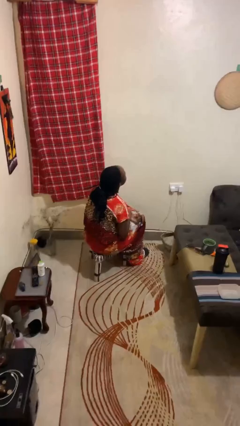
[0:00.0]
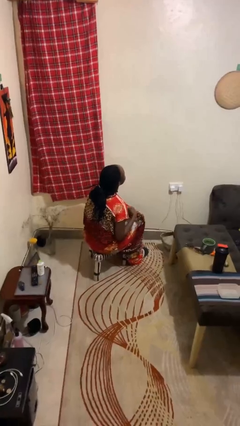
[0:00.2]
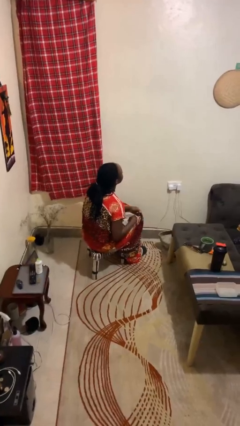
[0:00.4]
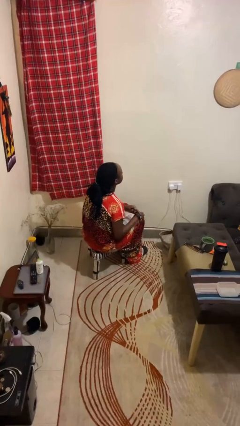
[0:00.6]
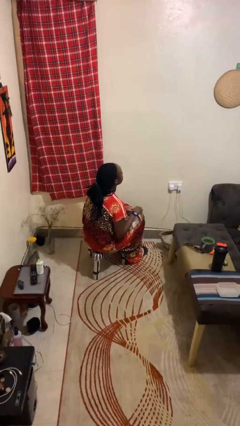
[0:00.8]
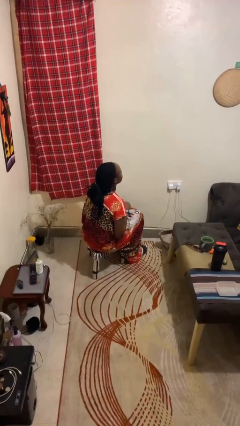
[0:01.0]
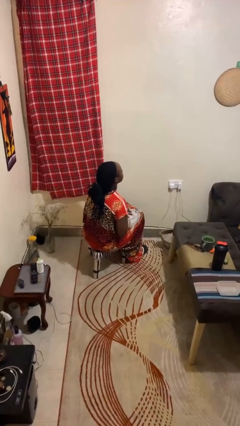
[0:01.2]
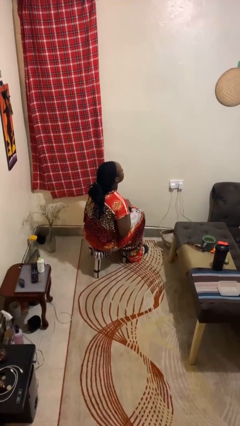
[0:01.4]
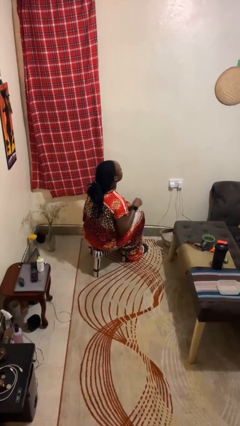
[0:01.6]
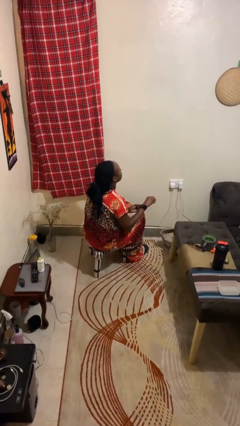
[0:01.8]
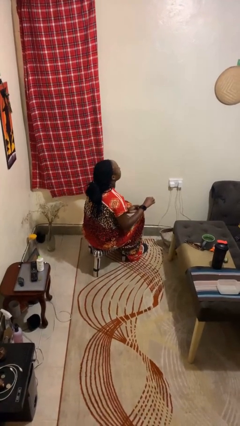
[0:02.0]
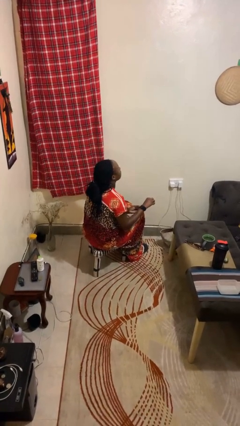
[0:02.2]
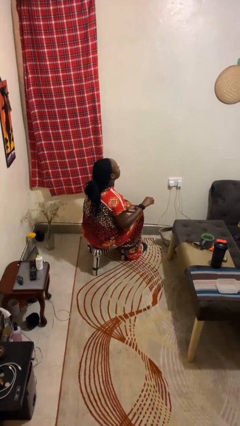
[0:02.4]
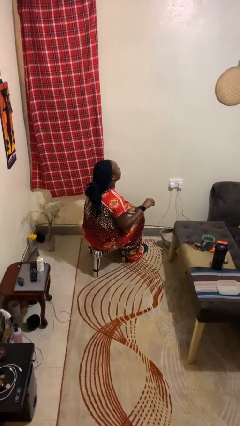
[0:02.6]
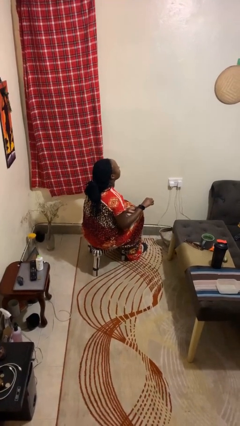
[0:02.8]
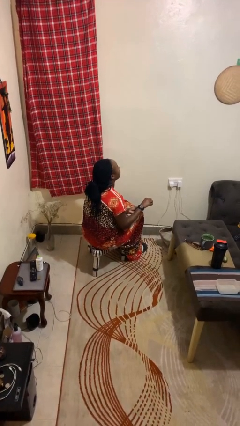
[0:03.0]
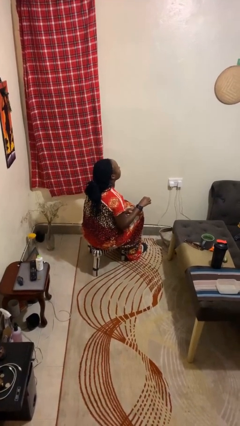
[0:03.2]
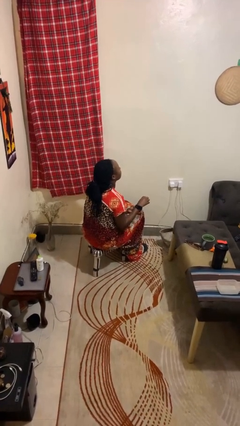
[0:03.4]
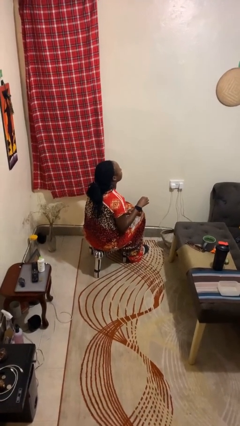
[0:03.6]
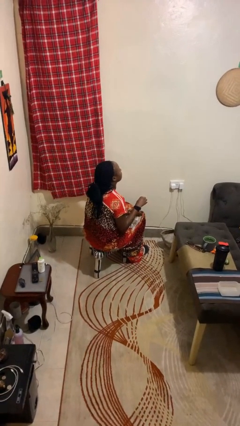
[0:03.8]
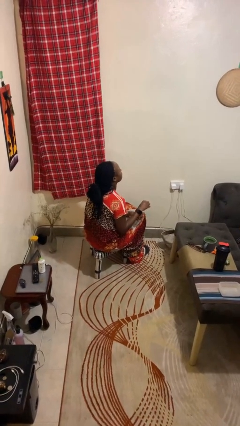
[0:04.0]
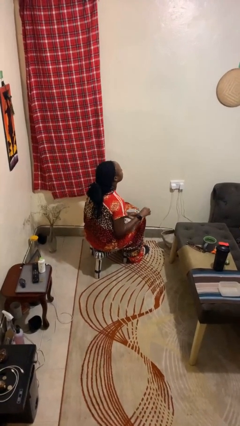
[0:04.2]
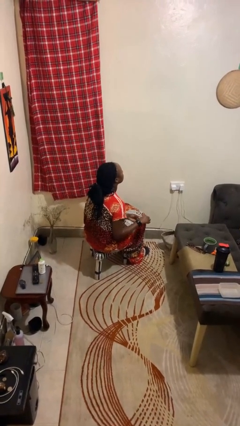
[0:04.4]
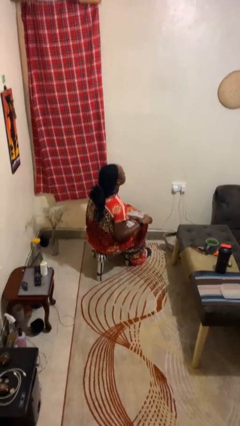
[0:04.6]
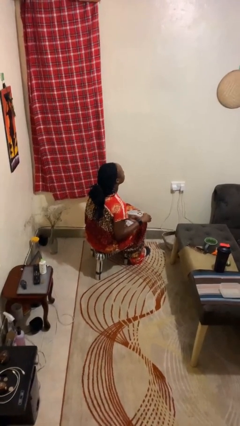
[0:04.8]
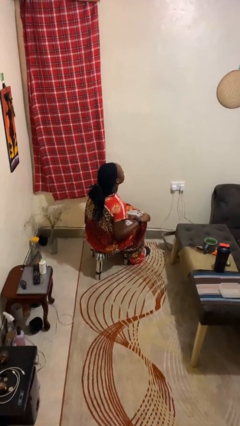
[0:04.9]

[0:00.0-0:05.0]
person puts on wristwatch

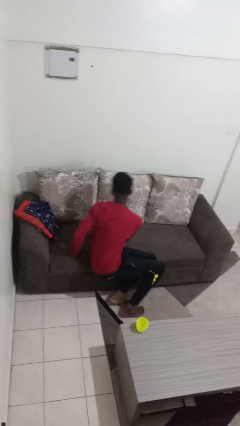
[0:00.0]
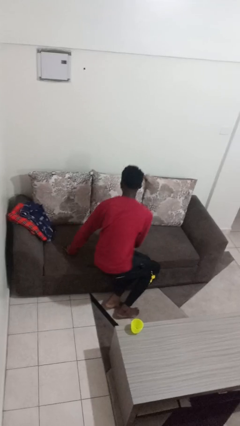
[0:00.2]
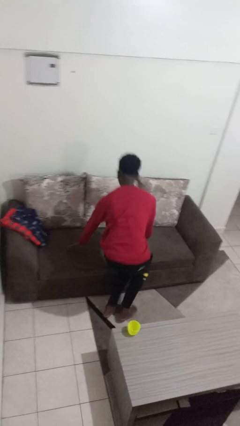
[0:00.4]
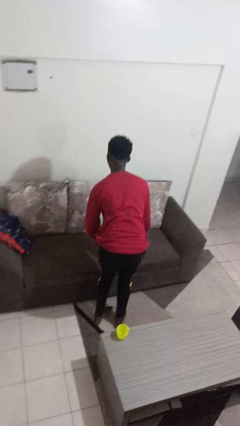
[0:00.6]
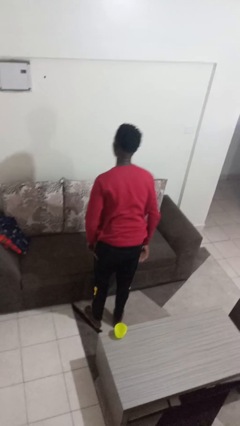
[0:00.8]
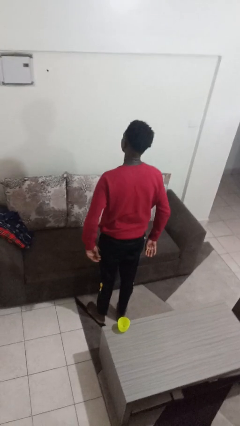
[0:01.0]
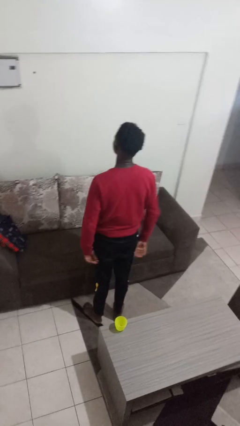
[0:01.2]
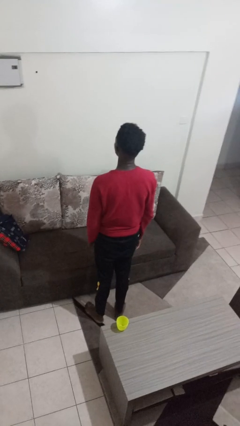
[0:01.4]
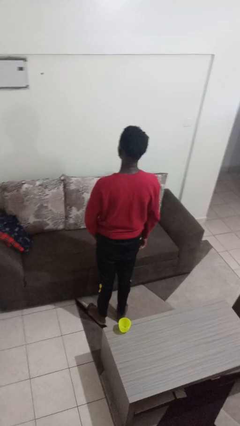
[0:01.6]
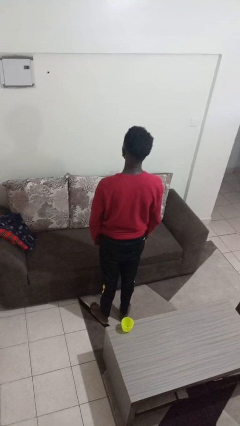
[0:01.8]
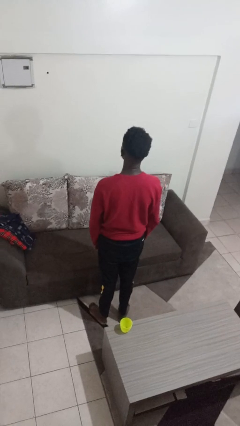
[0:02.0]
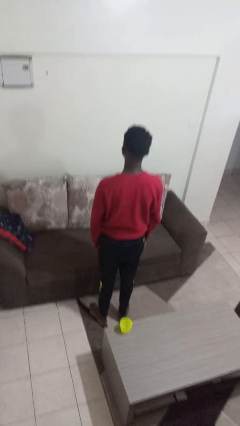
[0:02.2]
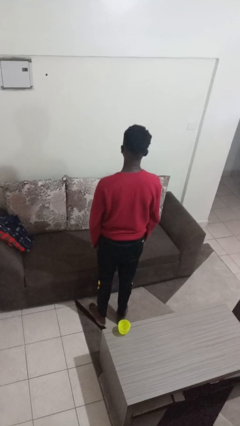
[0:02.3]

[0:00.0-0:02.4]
person stands up

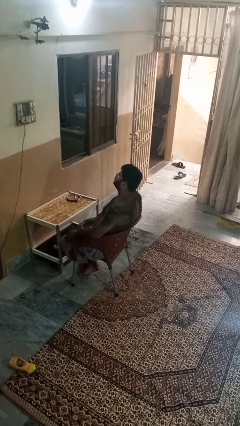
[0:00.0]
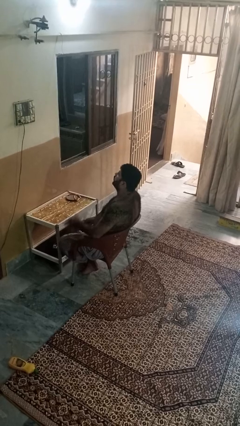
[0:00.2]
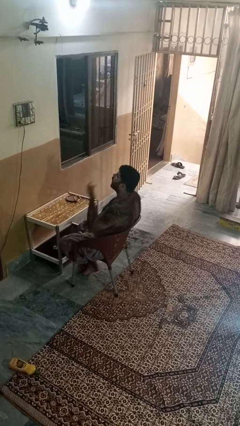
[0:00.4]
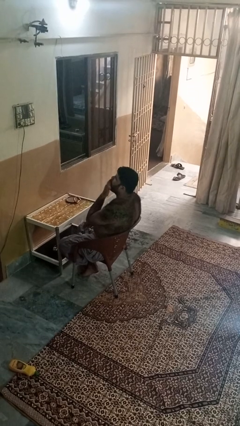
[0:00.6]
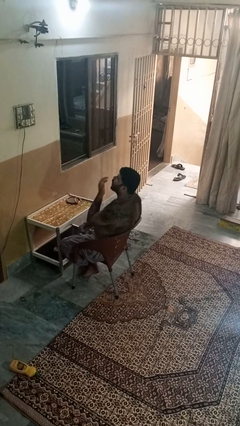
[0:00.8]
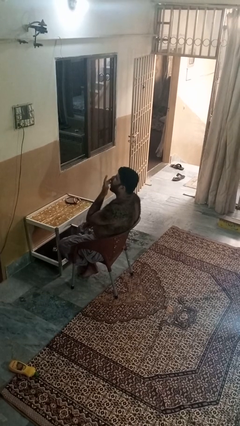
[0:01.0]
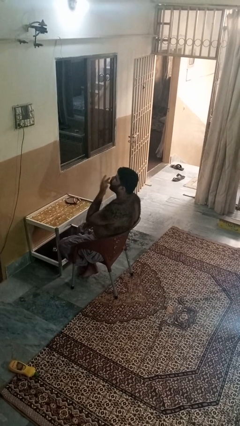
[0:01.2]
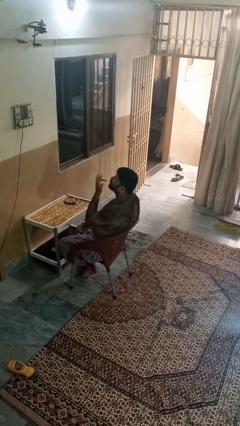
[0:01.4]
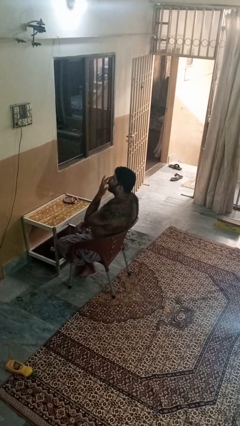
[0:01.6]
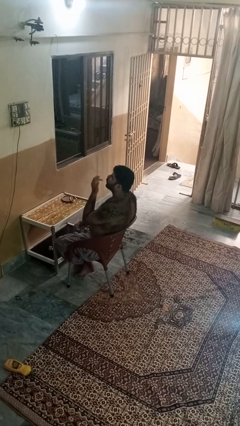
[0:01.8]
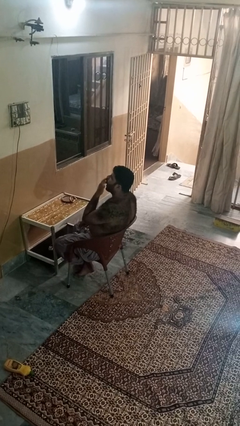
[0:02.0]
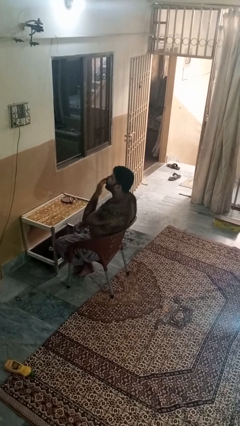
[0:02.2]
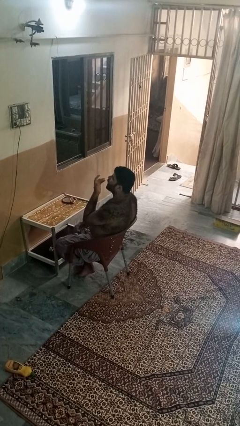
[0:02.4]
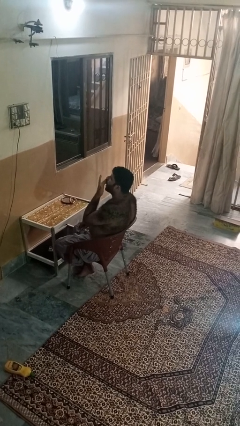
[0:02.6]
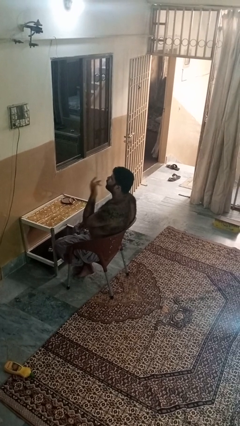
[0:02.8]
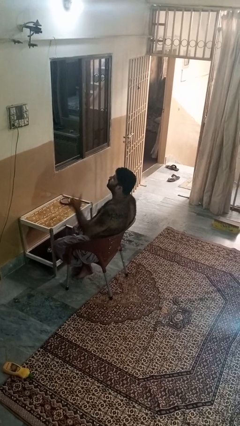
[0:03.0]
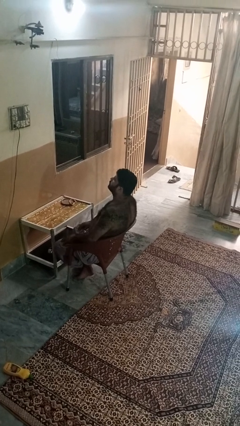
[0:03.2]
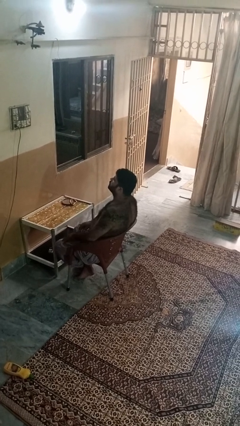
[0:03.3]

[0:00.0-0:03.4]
person licks fingers

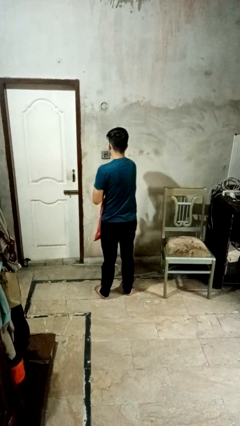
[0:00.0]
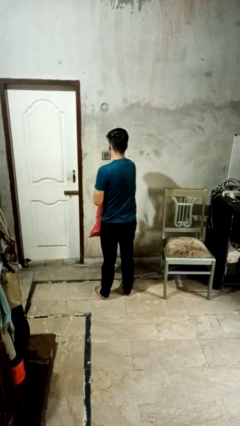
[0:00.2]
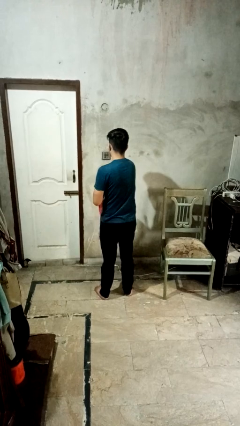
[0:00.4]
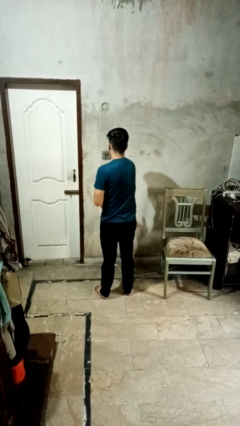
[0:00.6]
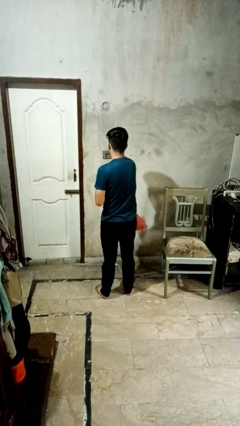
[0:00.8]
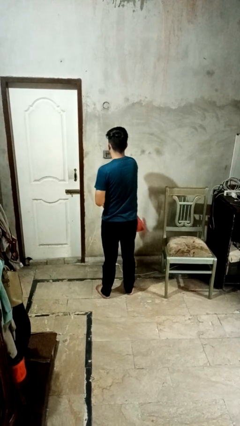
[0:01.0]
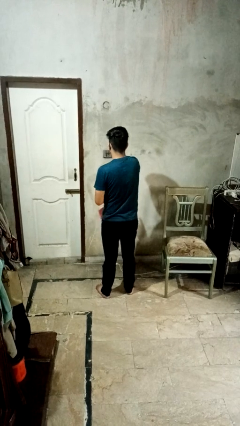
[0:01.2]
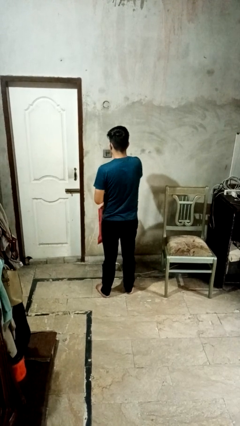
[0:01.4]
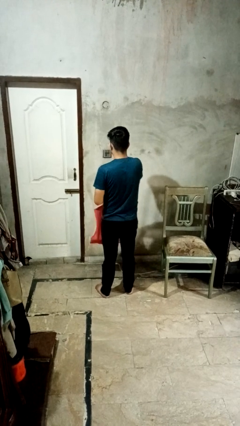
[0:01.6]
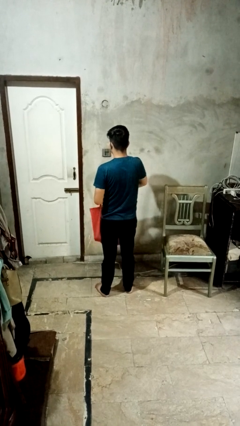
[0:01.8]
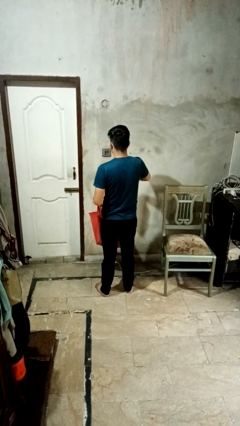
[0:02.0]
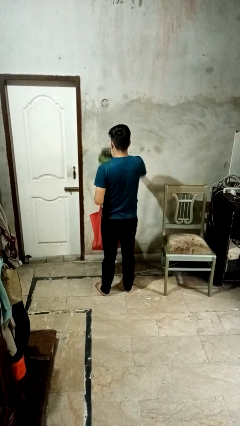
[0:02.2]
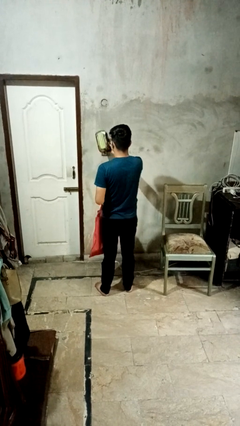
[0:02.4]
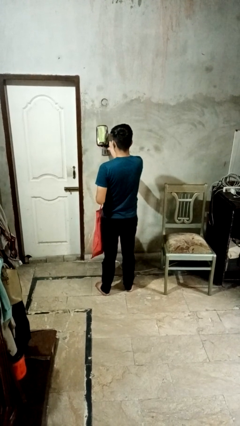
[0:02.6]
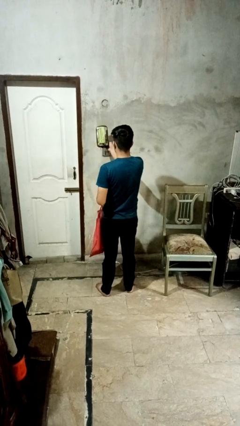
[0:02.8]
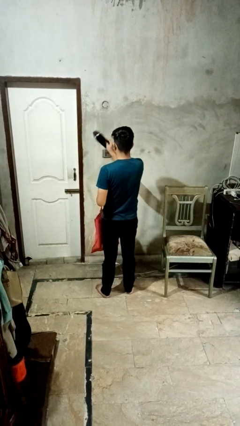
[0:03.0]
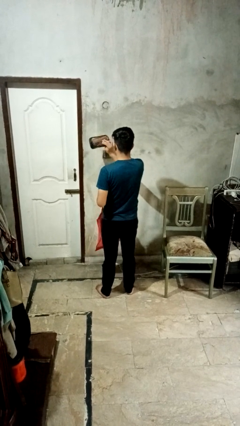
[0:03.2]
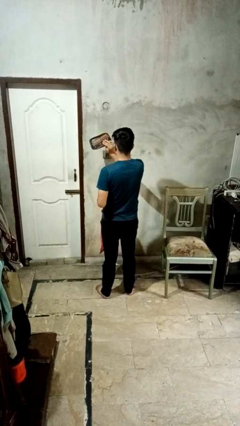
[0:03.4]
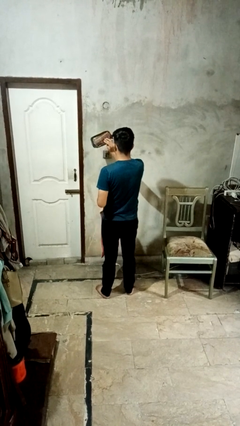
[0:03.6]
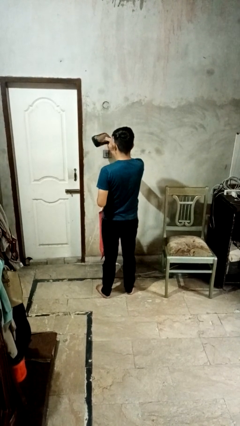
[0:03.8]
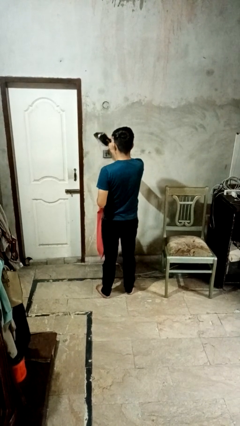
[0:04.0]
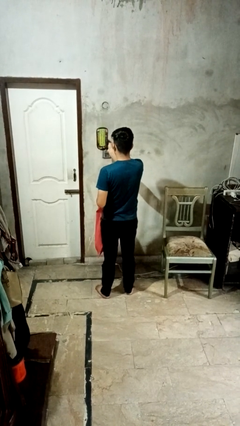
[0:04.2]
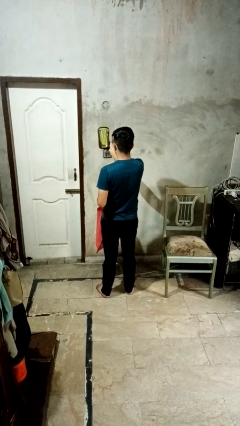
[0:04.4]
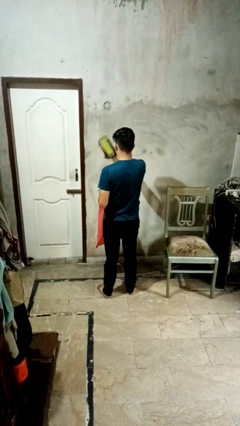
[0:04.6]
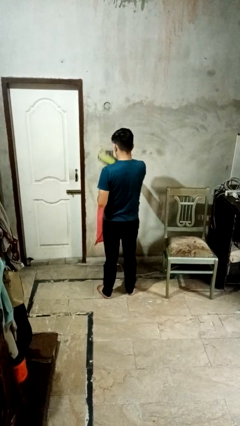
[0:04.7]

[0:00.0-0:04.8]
person takes object from bag

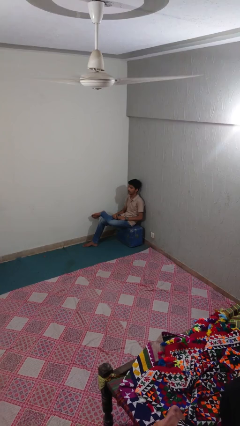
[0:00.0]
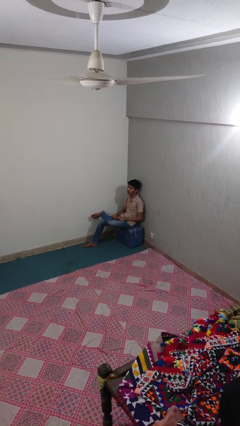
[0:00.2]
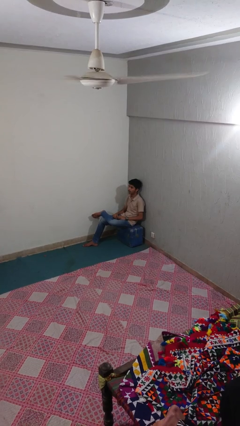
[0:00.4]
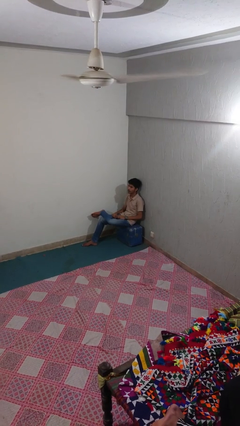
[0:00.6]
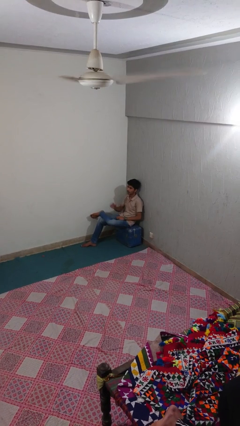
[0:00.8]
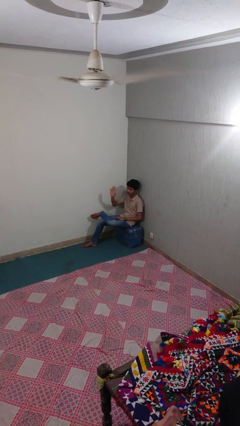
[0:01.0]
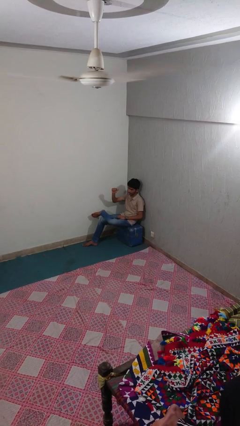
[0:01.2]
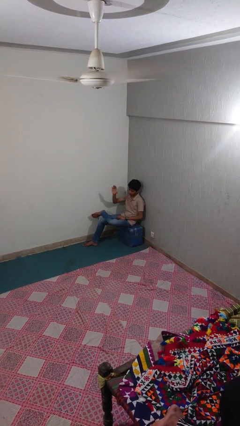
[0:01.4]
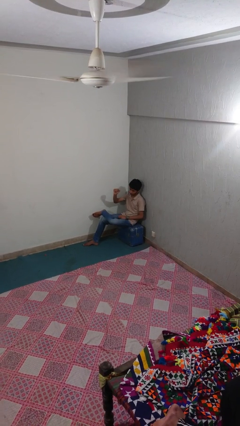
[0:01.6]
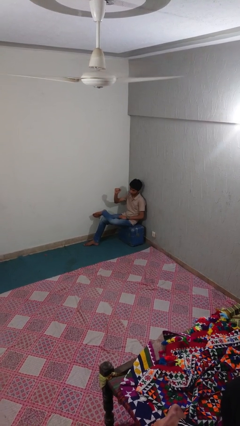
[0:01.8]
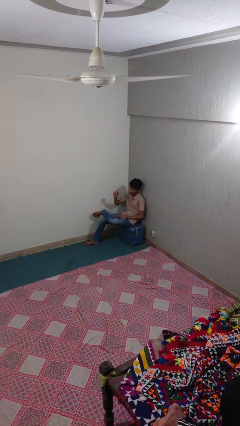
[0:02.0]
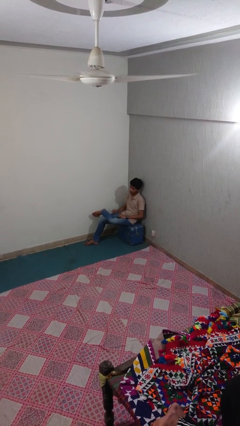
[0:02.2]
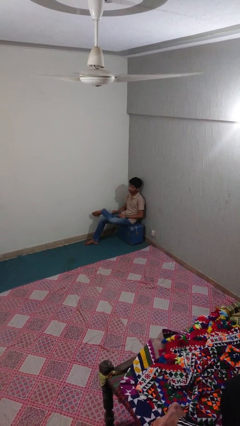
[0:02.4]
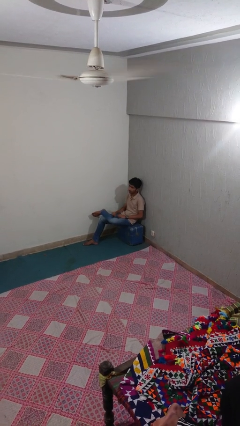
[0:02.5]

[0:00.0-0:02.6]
person gestures come here
